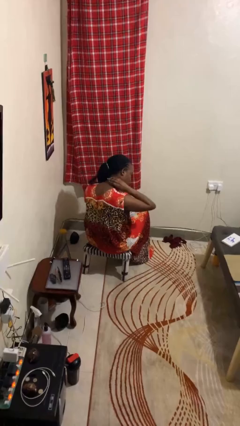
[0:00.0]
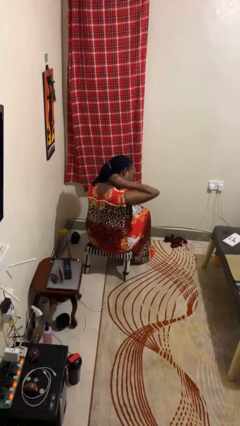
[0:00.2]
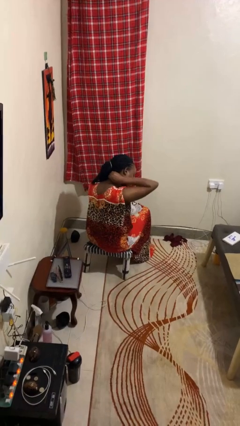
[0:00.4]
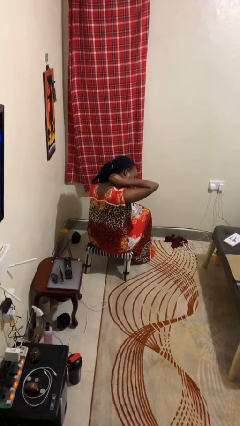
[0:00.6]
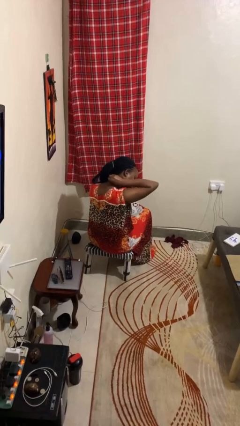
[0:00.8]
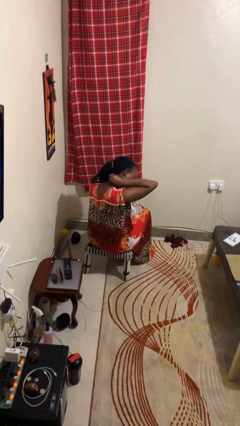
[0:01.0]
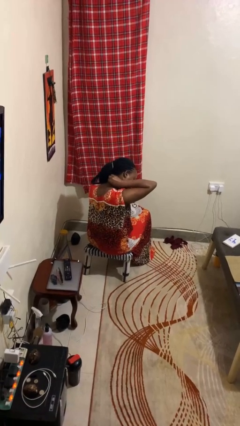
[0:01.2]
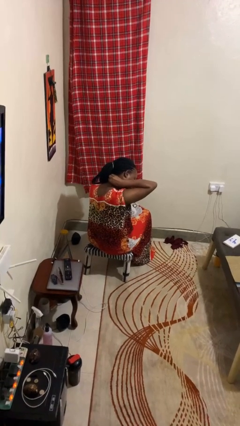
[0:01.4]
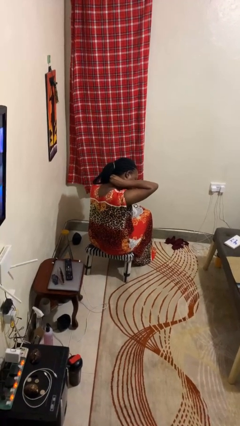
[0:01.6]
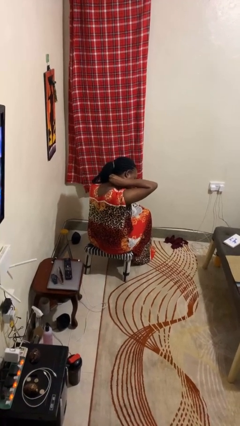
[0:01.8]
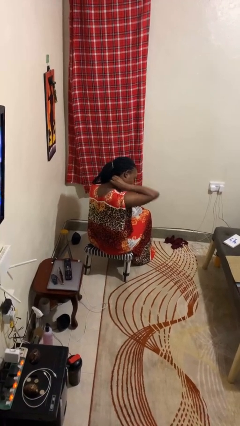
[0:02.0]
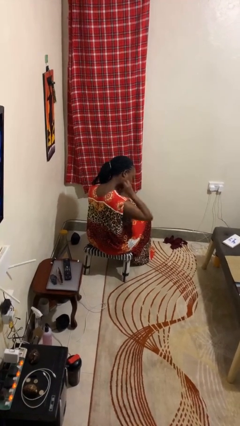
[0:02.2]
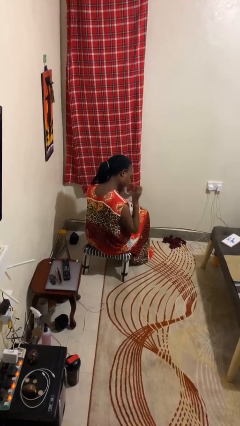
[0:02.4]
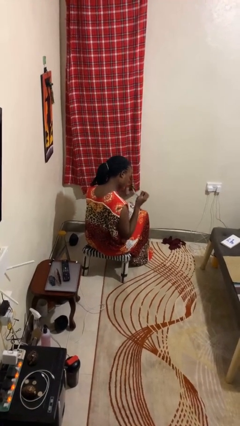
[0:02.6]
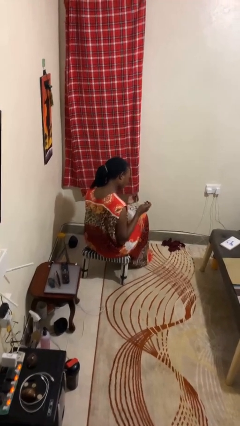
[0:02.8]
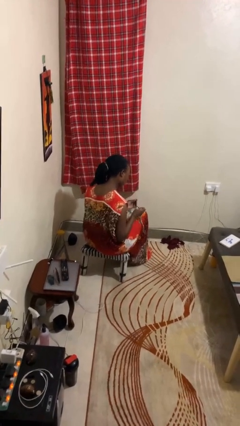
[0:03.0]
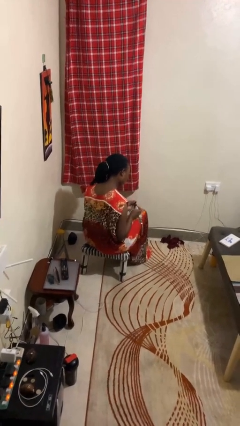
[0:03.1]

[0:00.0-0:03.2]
person takes off necklace

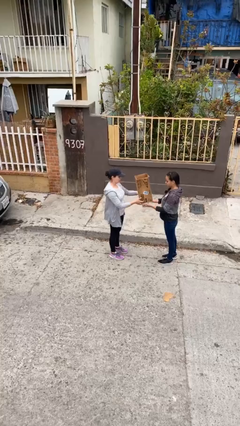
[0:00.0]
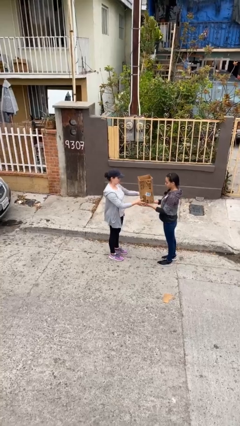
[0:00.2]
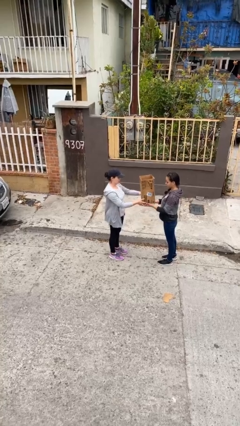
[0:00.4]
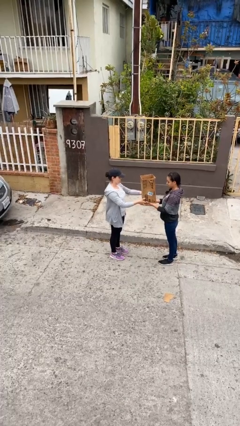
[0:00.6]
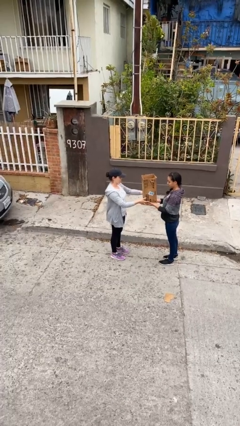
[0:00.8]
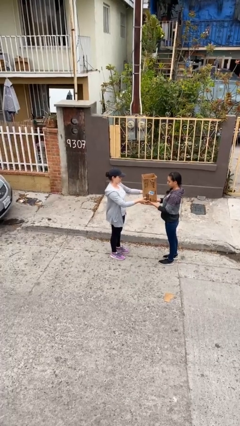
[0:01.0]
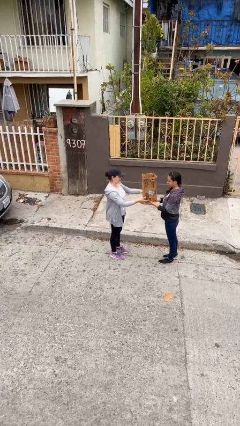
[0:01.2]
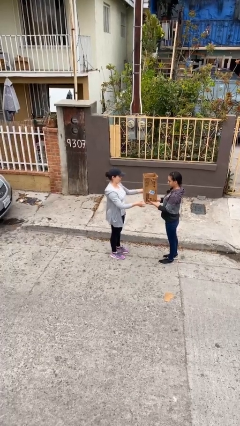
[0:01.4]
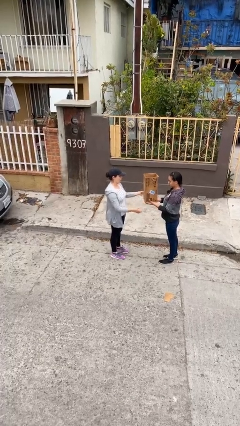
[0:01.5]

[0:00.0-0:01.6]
person transfers object to person

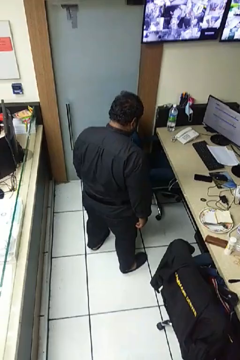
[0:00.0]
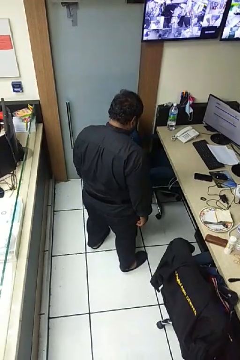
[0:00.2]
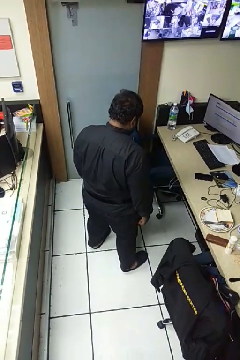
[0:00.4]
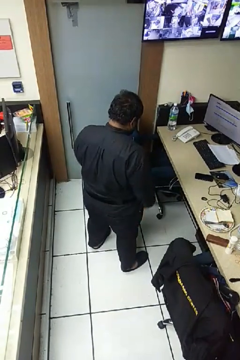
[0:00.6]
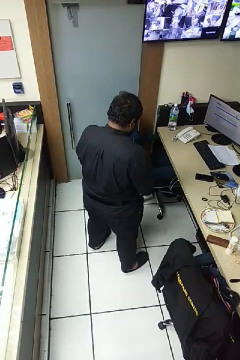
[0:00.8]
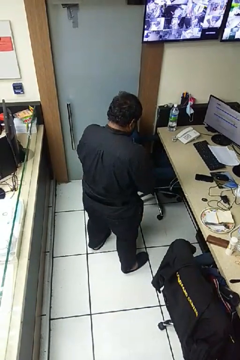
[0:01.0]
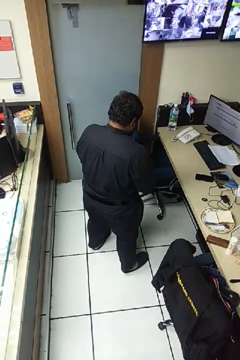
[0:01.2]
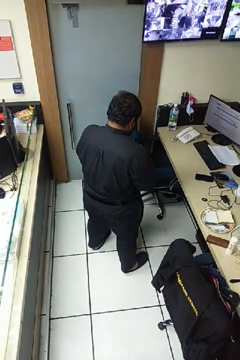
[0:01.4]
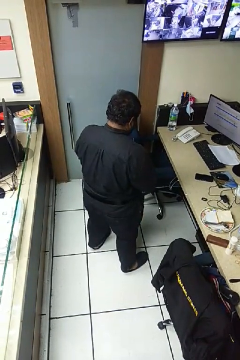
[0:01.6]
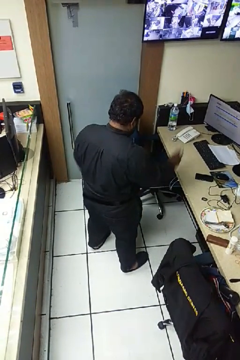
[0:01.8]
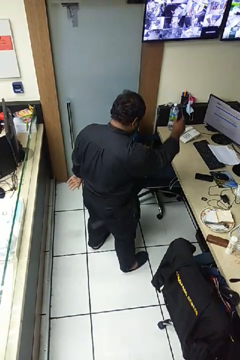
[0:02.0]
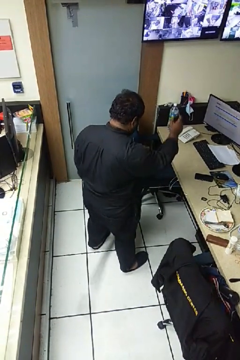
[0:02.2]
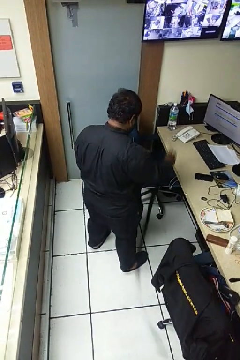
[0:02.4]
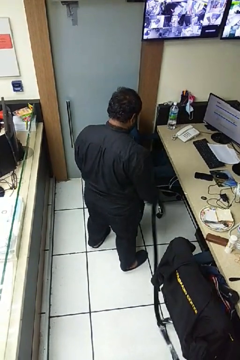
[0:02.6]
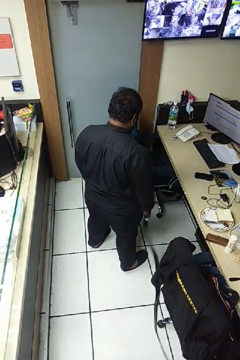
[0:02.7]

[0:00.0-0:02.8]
person takes off belt

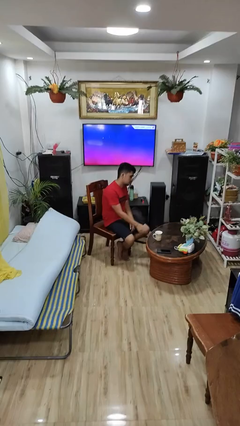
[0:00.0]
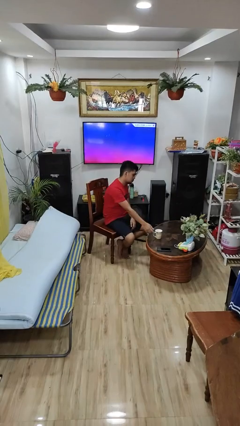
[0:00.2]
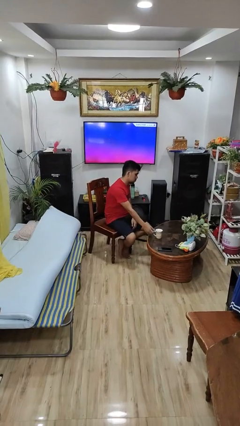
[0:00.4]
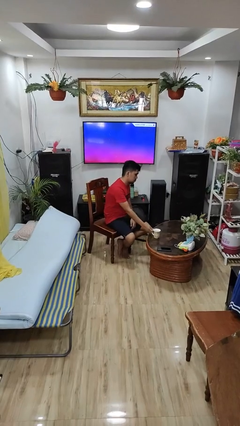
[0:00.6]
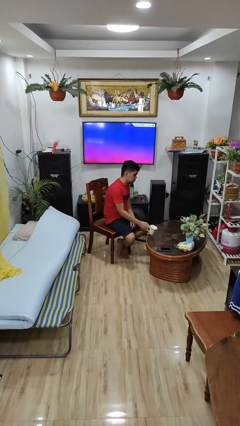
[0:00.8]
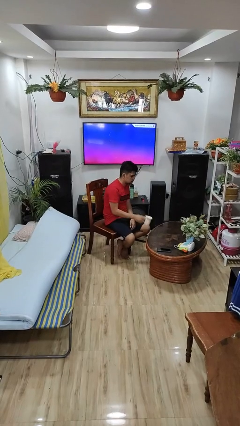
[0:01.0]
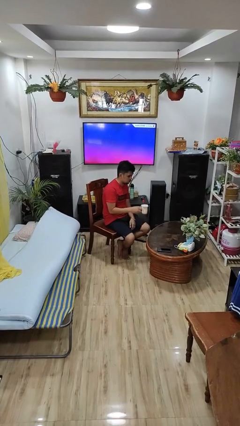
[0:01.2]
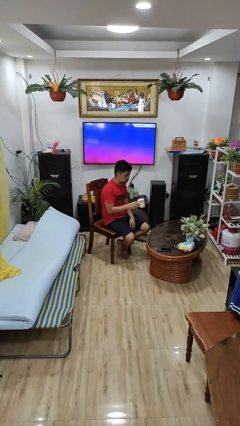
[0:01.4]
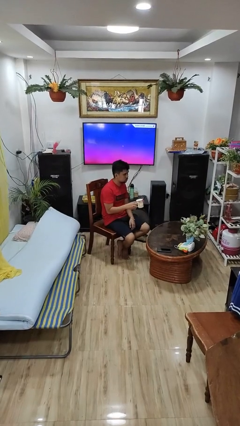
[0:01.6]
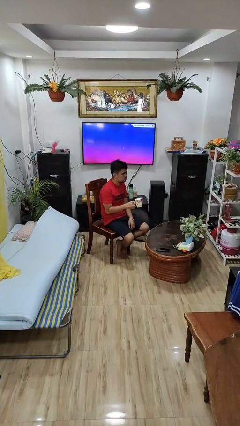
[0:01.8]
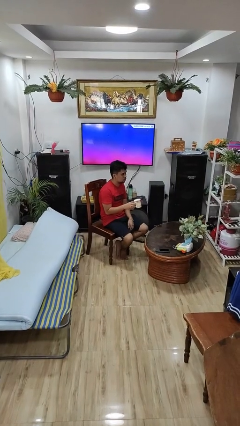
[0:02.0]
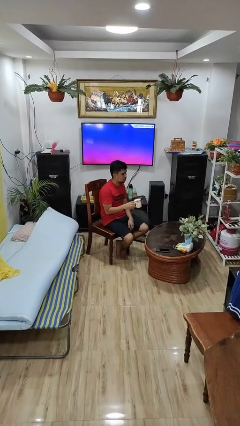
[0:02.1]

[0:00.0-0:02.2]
person picks up object from table

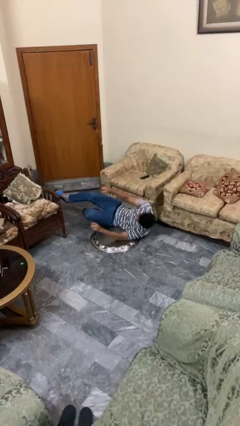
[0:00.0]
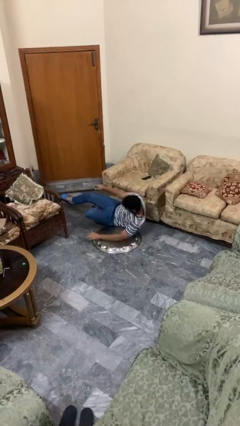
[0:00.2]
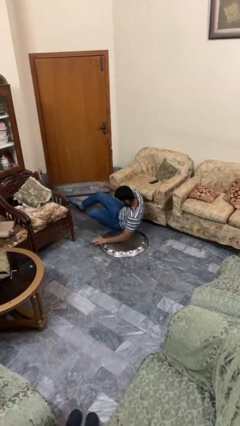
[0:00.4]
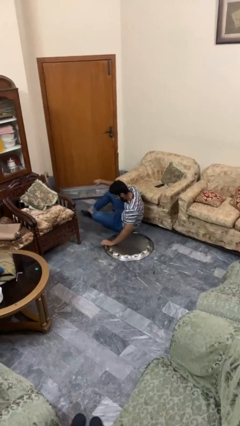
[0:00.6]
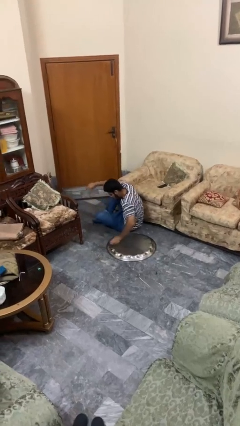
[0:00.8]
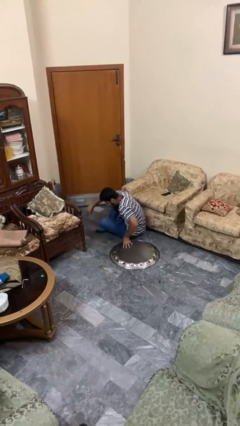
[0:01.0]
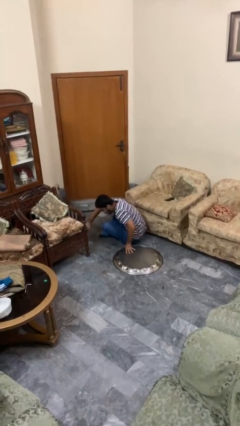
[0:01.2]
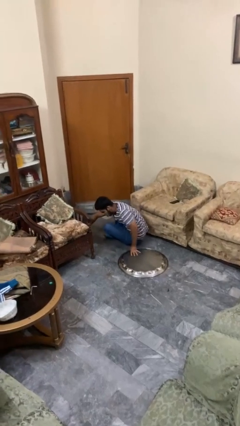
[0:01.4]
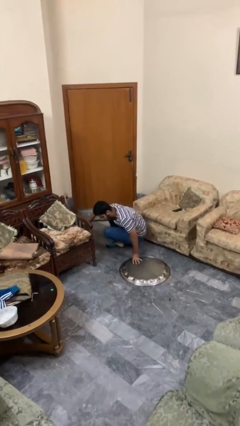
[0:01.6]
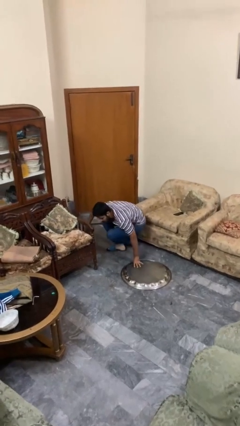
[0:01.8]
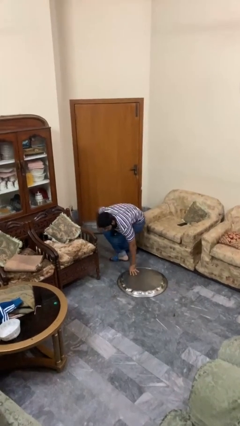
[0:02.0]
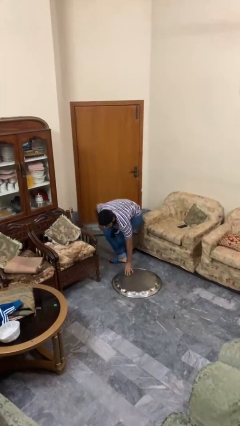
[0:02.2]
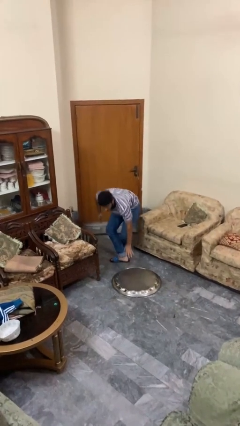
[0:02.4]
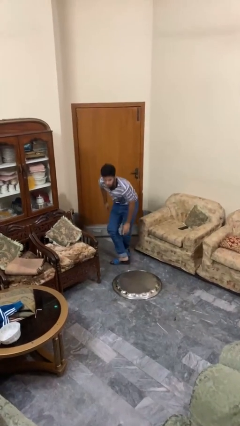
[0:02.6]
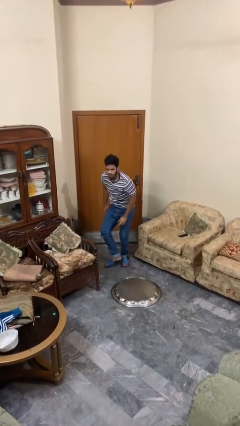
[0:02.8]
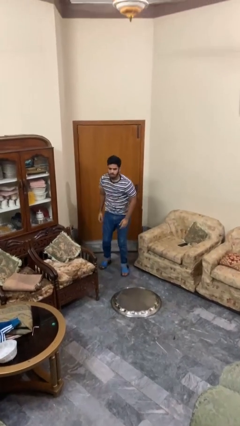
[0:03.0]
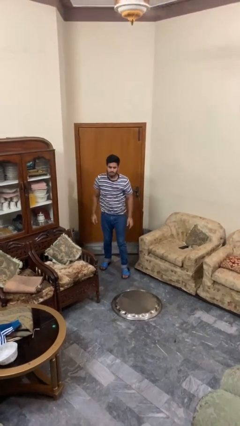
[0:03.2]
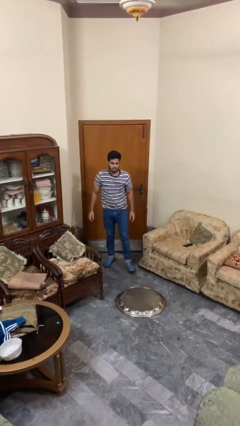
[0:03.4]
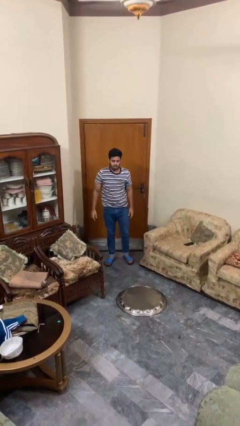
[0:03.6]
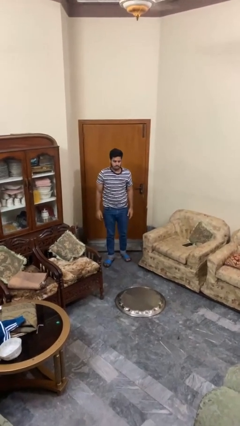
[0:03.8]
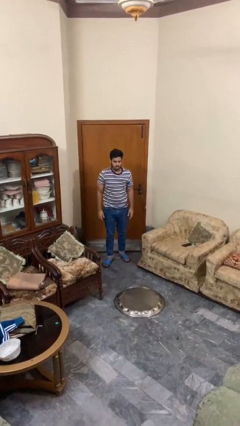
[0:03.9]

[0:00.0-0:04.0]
person stands up from floor

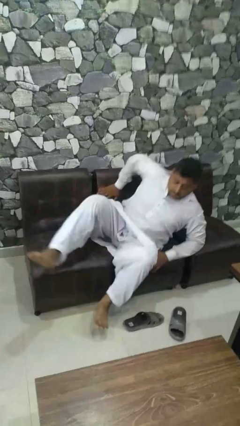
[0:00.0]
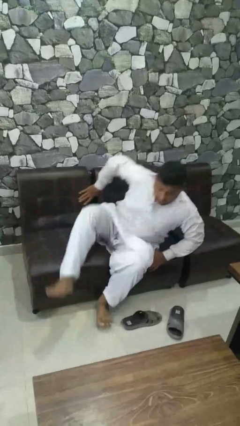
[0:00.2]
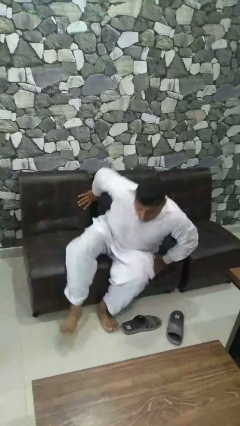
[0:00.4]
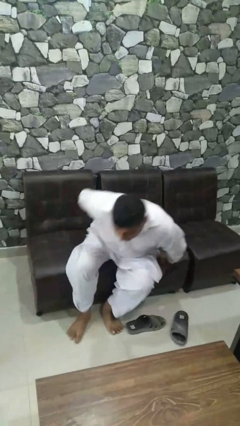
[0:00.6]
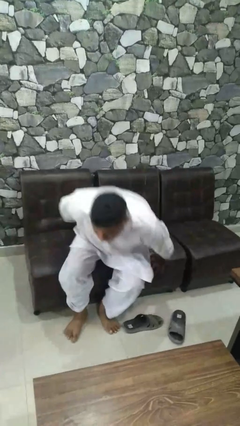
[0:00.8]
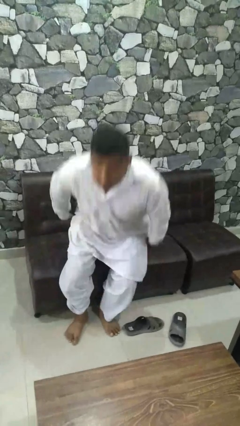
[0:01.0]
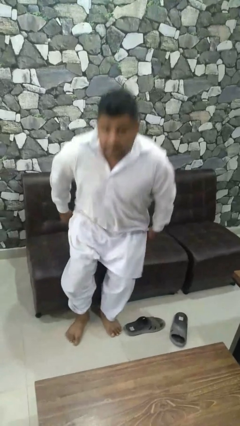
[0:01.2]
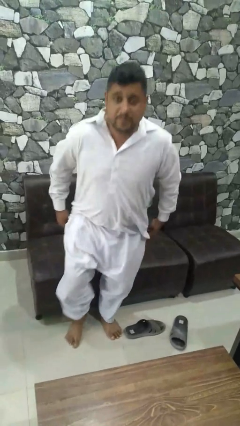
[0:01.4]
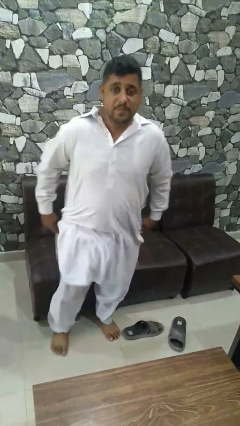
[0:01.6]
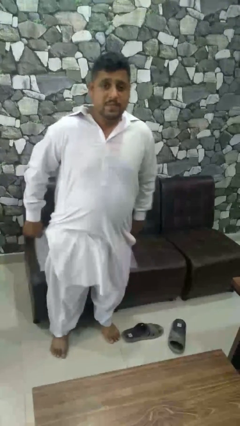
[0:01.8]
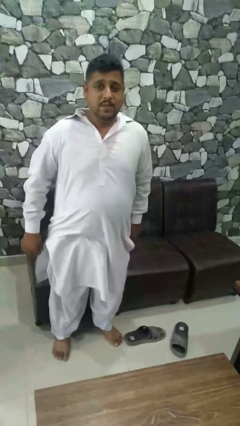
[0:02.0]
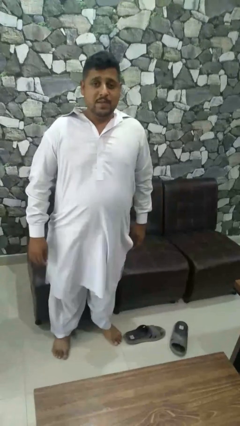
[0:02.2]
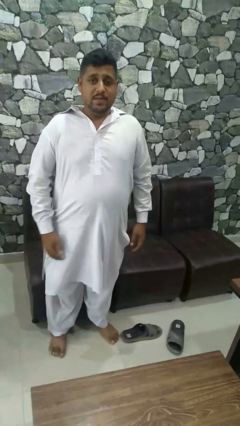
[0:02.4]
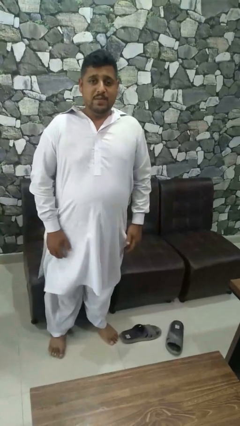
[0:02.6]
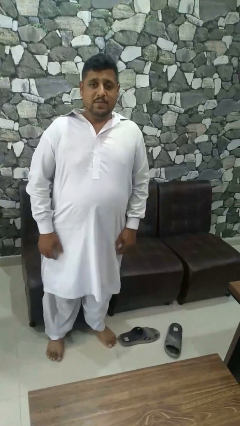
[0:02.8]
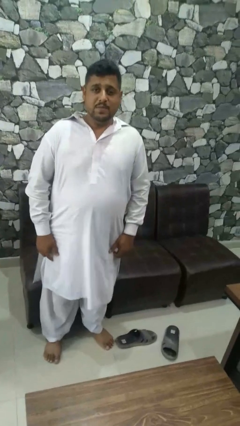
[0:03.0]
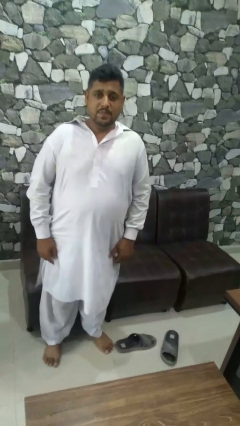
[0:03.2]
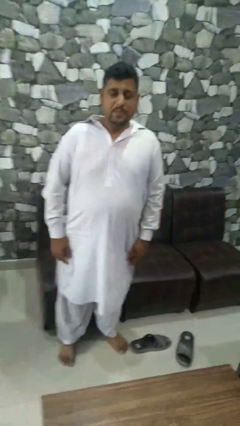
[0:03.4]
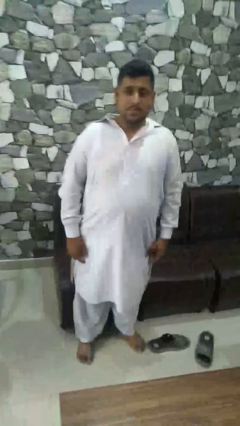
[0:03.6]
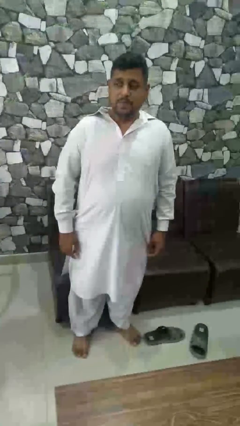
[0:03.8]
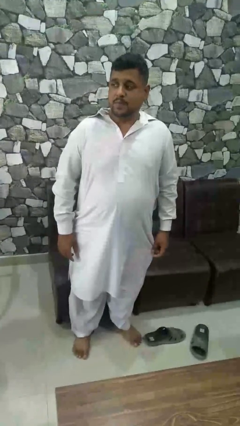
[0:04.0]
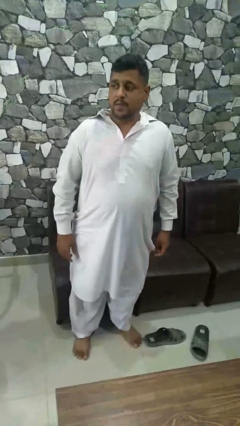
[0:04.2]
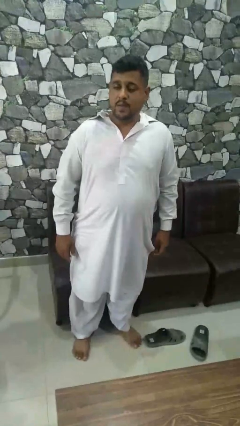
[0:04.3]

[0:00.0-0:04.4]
person stands up
